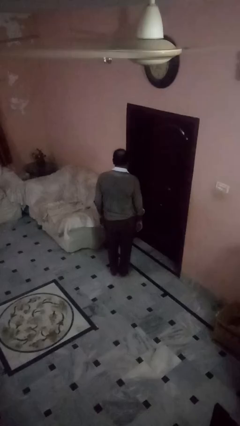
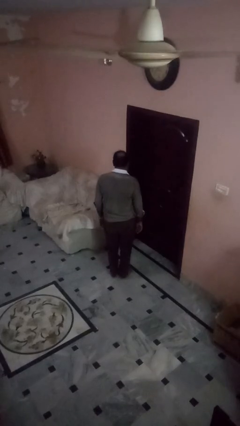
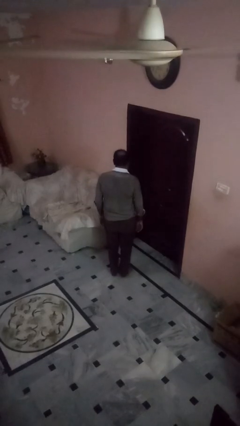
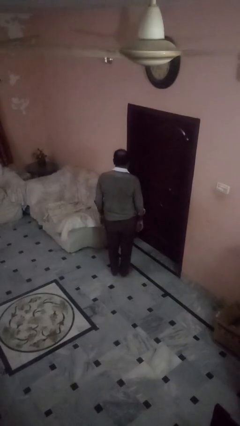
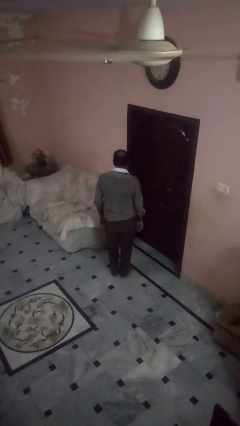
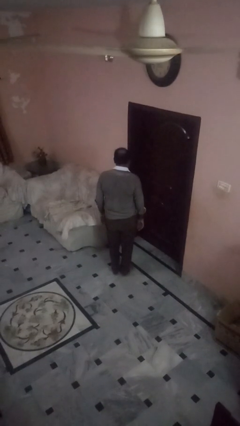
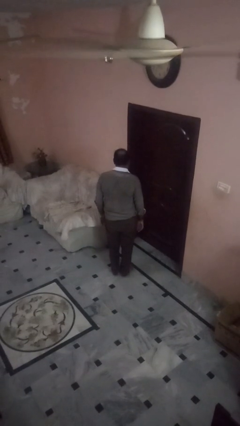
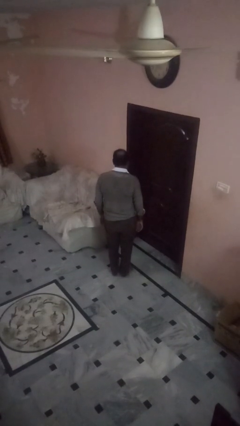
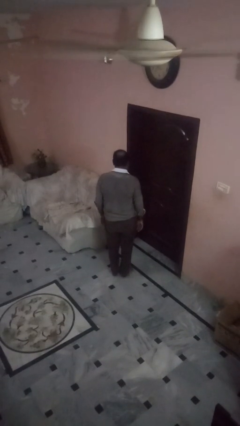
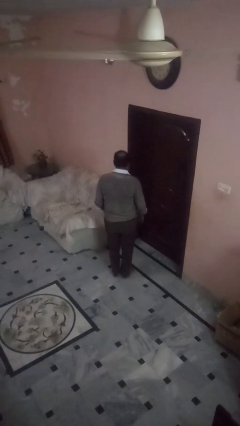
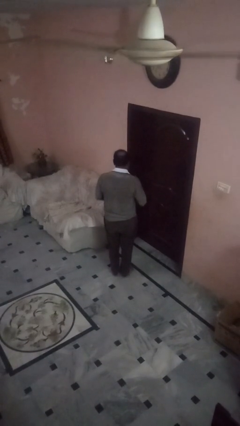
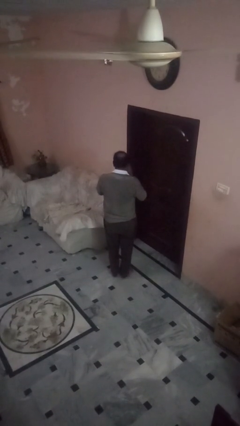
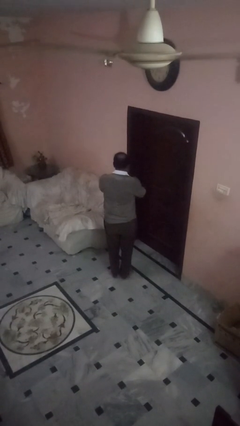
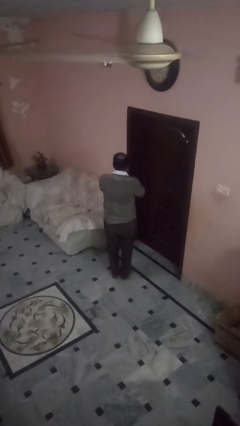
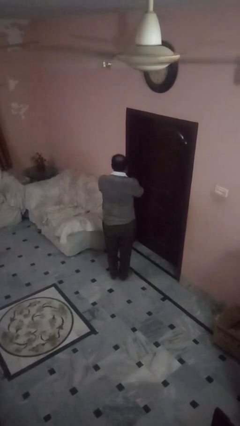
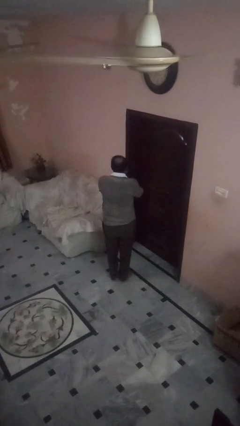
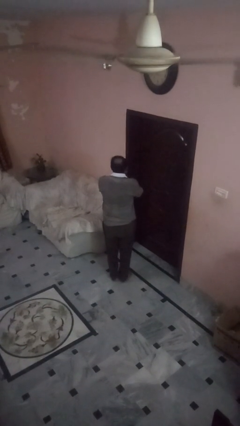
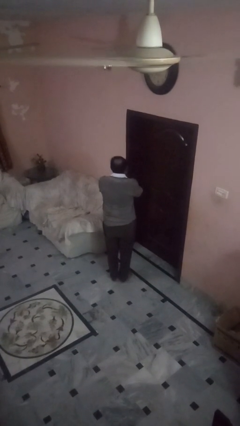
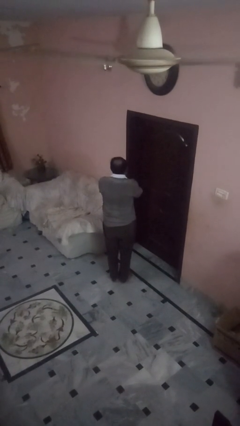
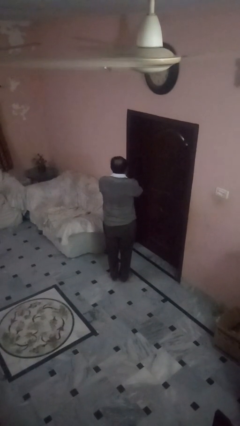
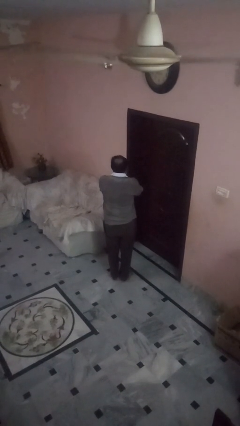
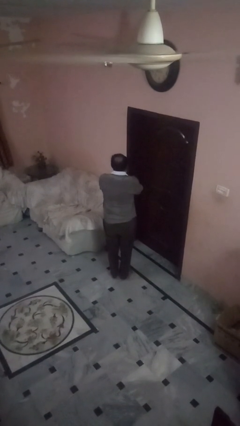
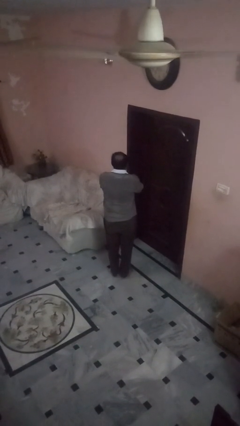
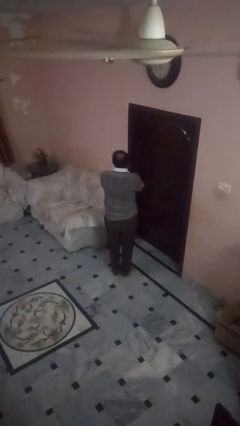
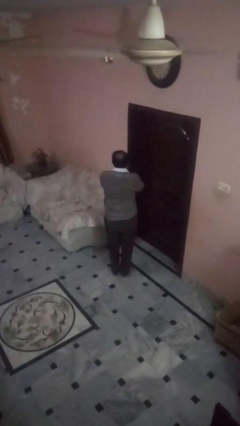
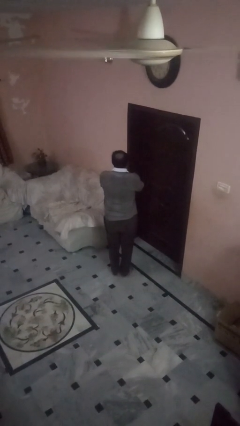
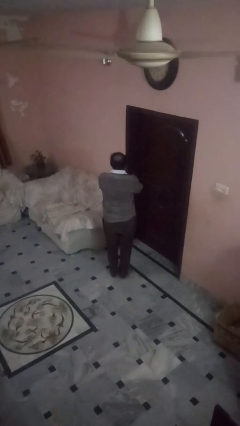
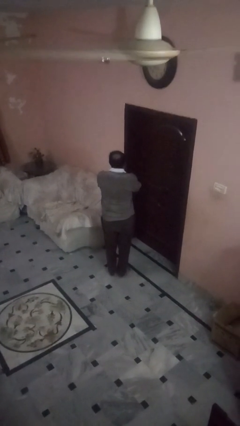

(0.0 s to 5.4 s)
person covers face with hands

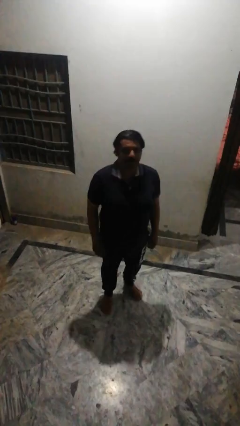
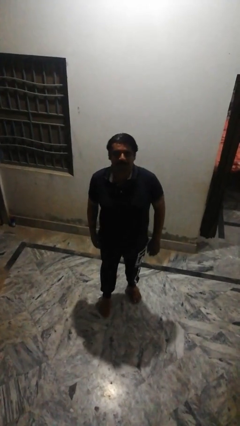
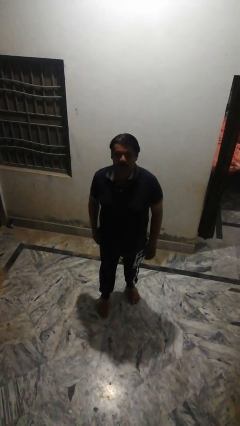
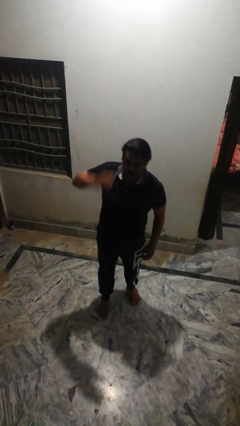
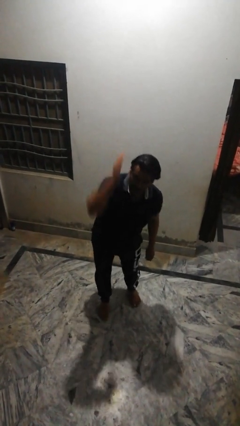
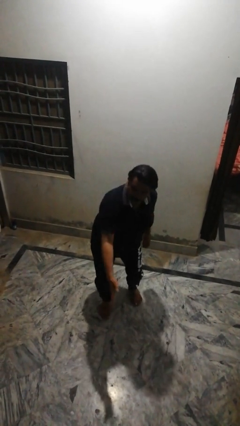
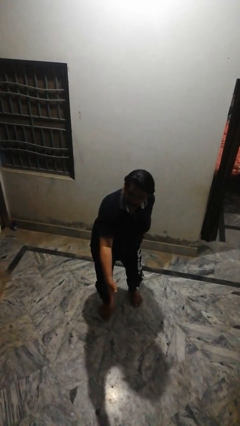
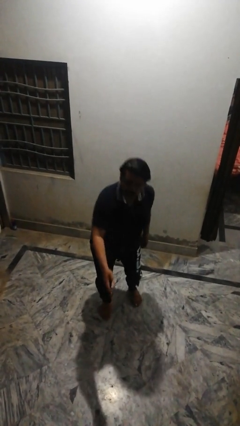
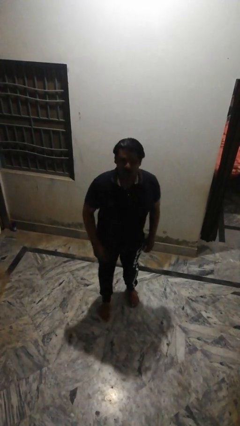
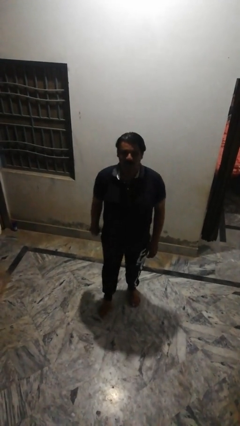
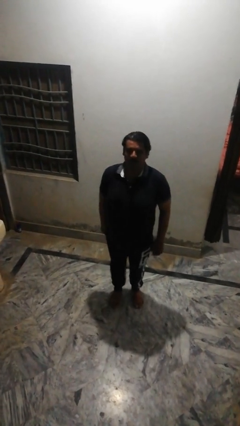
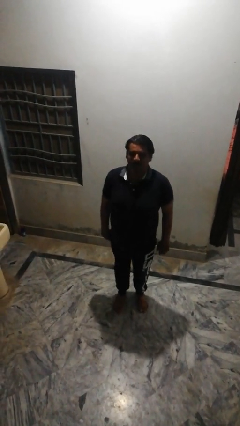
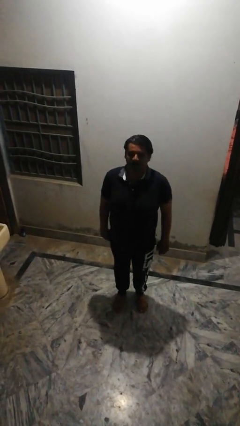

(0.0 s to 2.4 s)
person karate chop

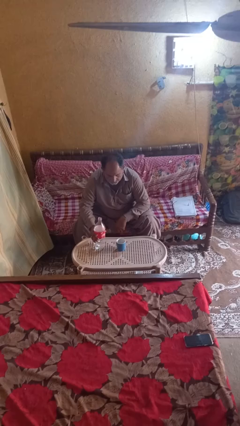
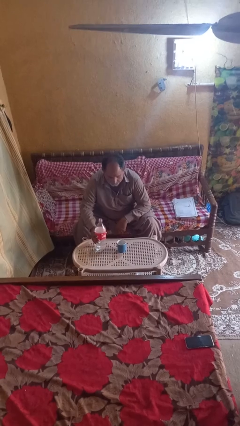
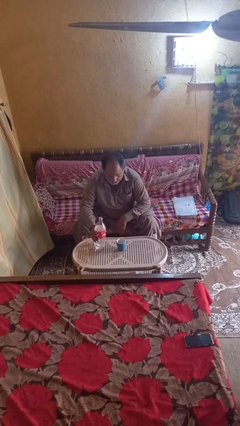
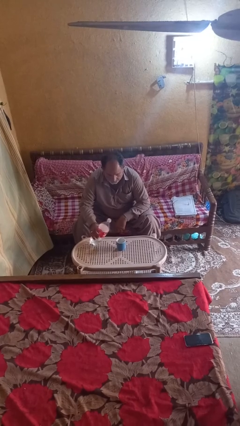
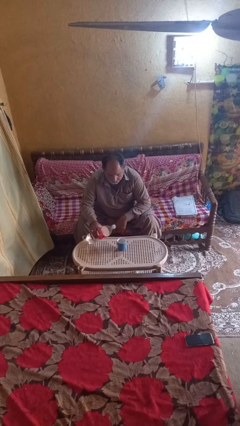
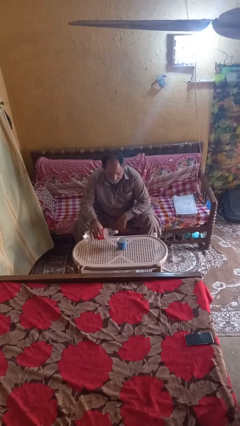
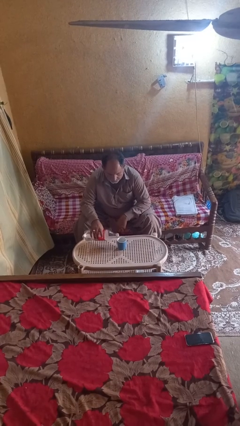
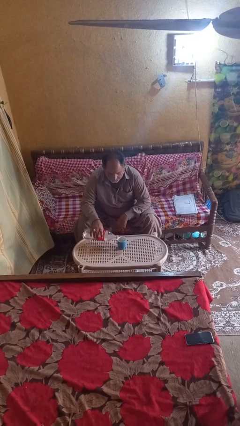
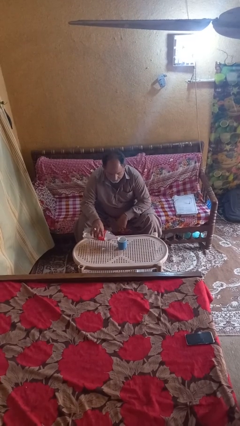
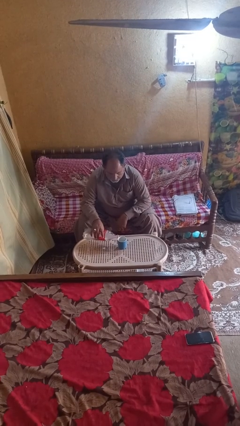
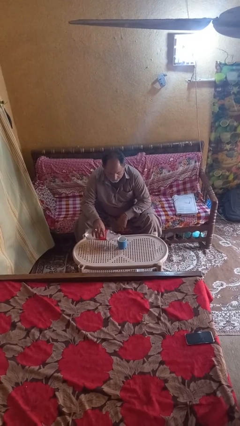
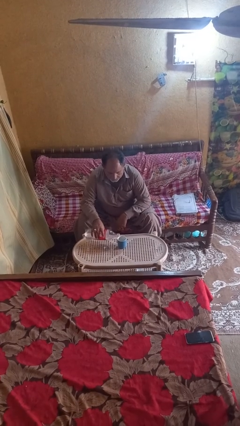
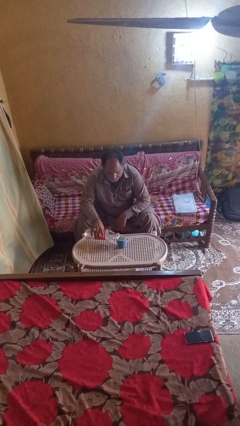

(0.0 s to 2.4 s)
person pours liquid into cup

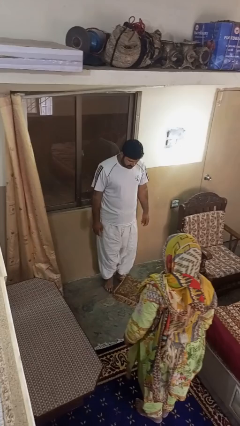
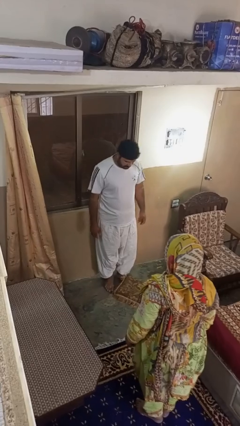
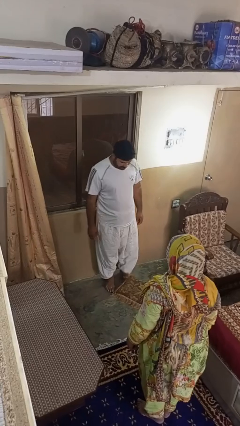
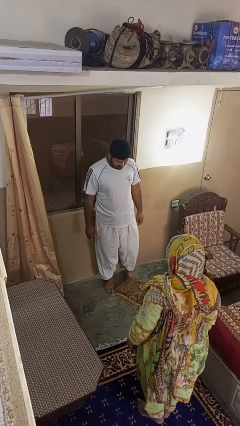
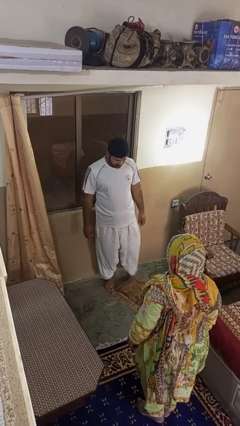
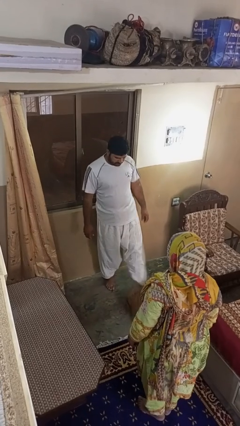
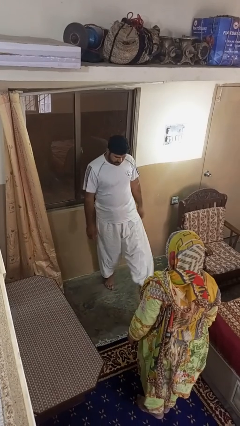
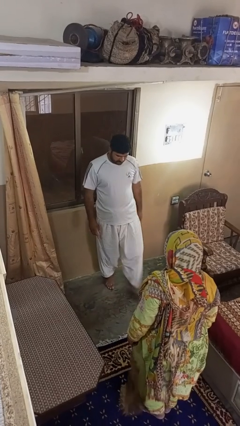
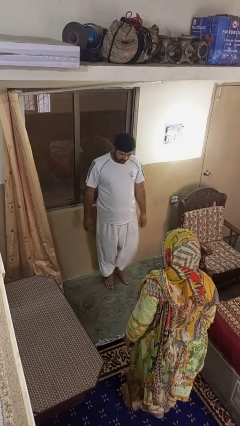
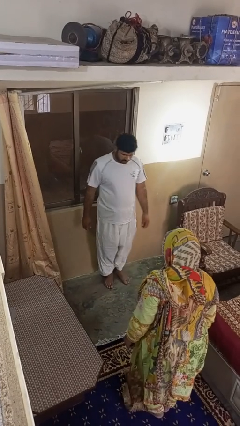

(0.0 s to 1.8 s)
person kicks object to person

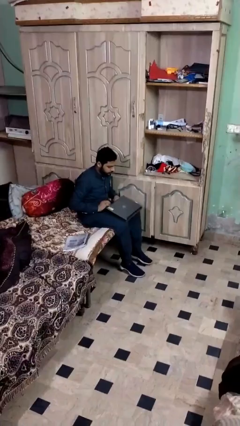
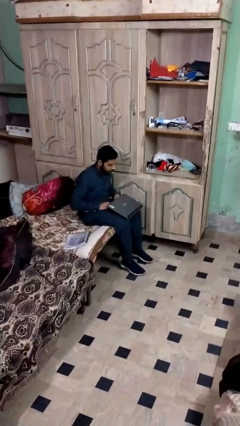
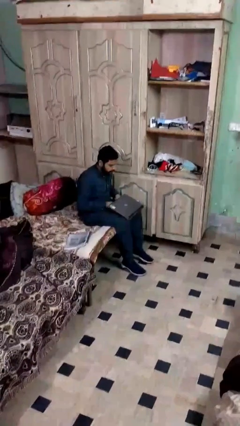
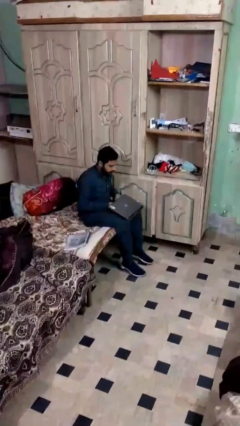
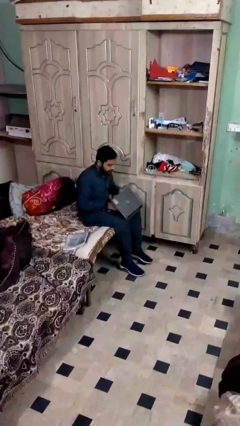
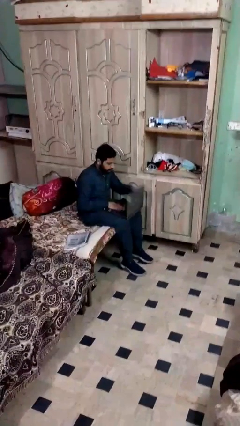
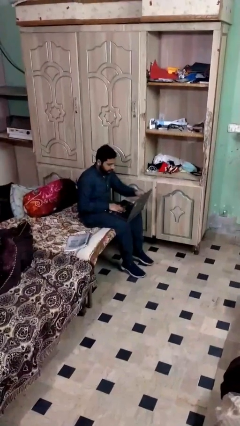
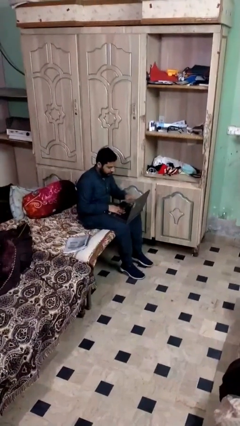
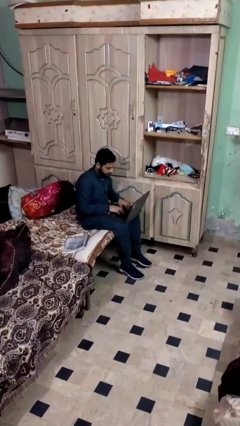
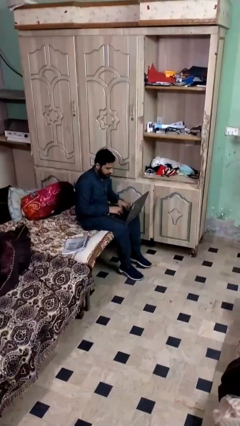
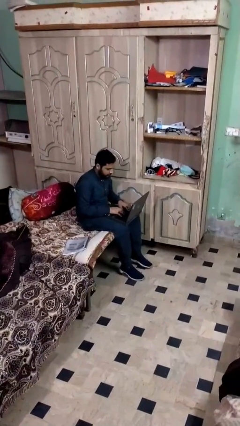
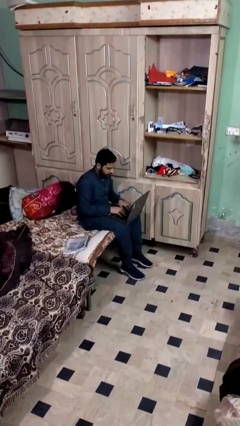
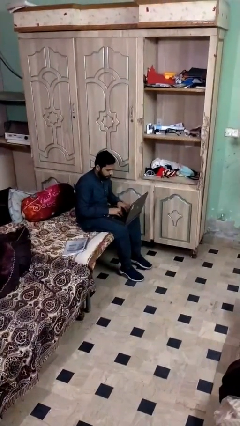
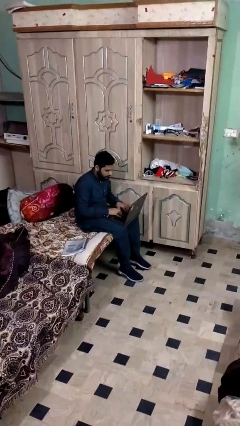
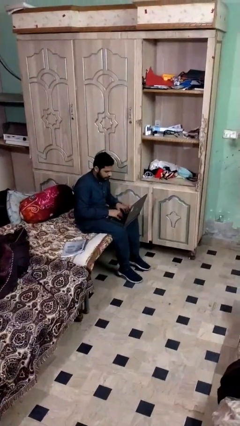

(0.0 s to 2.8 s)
person interacts with laptop

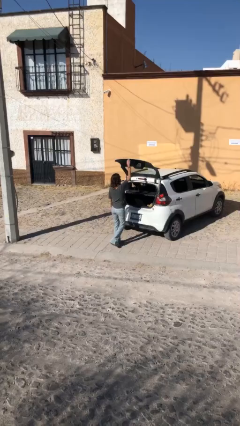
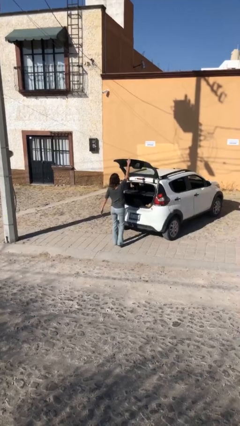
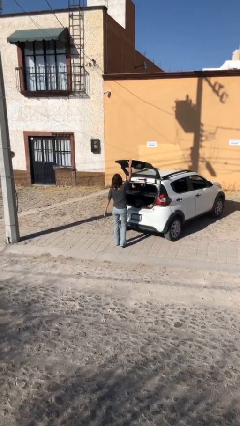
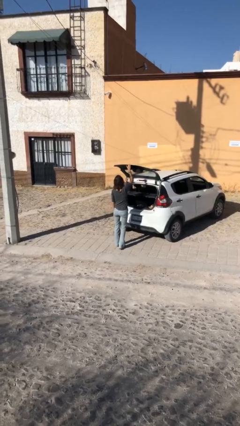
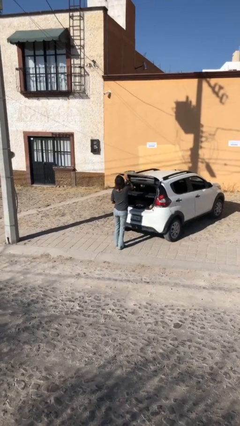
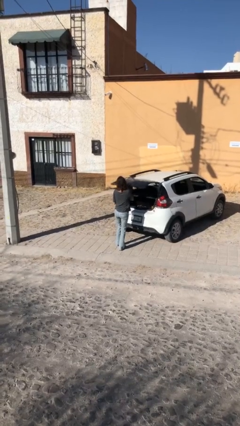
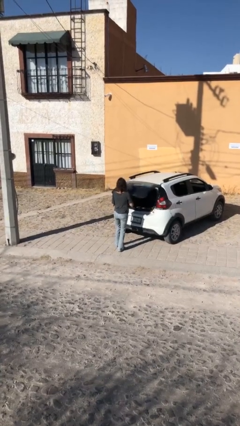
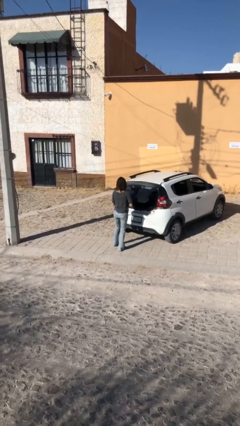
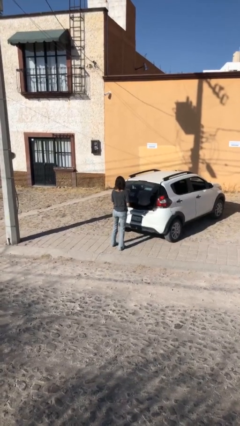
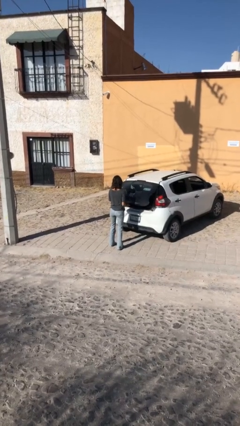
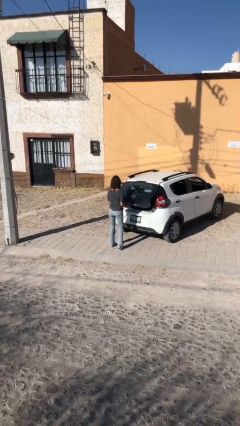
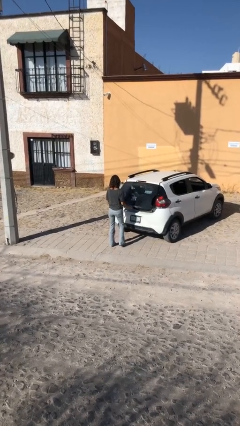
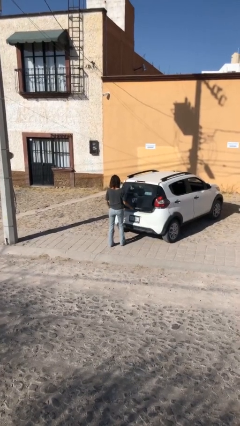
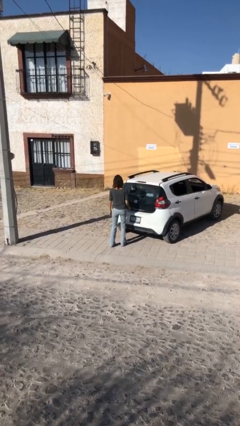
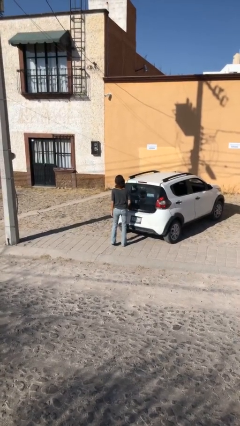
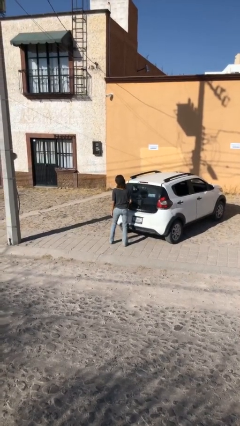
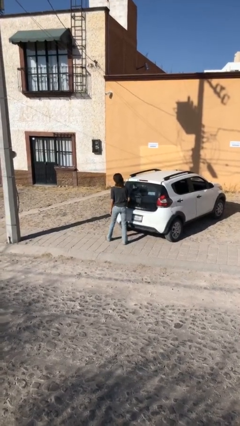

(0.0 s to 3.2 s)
person closes car trunk
